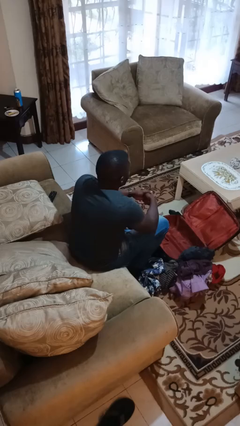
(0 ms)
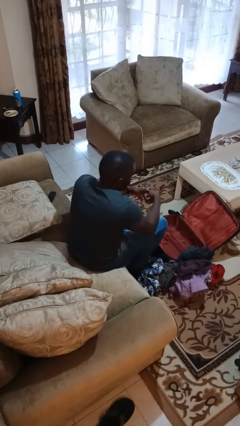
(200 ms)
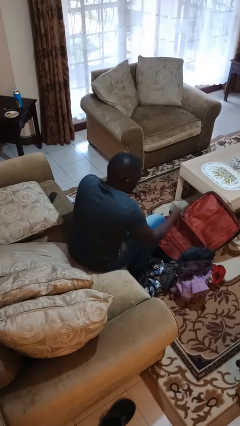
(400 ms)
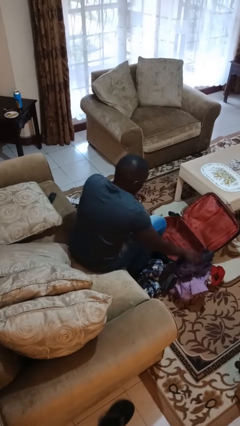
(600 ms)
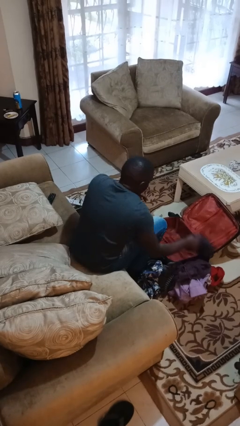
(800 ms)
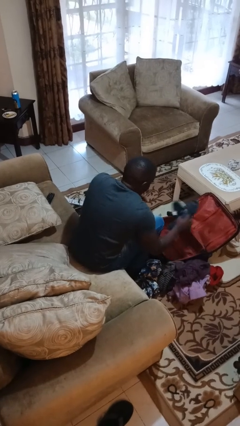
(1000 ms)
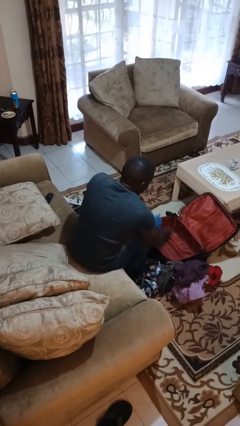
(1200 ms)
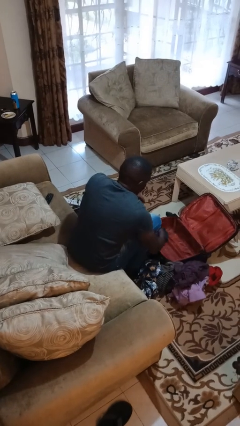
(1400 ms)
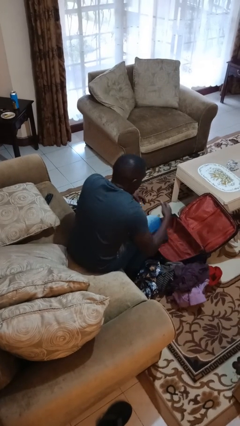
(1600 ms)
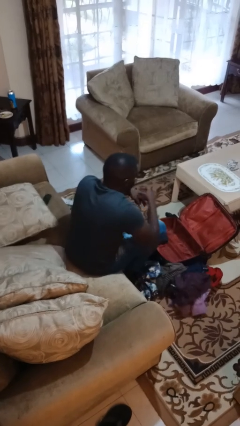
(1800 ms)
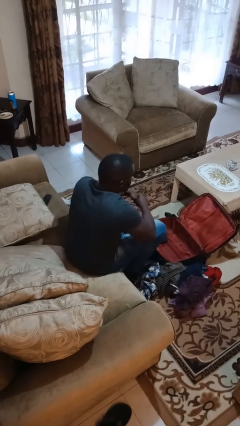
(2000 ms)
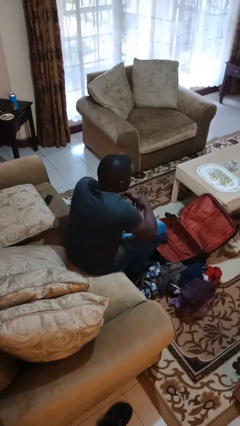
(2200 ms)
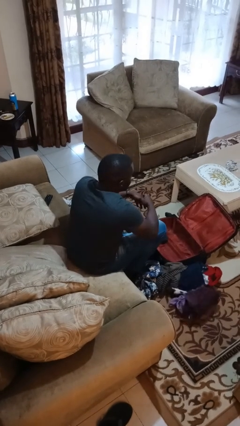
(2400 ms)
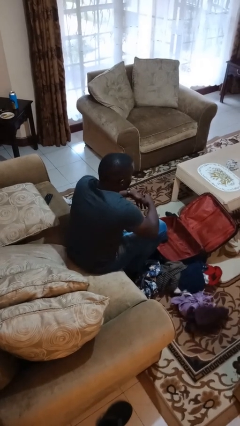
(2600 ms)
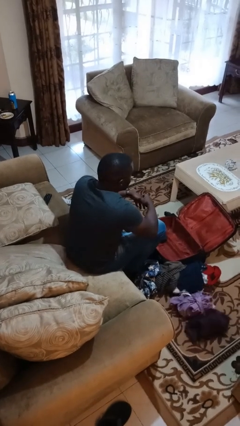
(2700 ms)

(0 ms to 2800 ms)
person loads clothes into suitcase

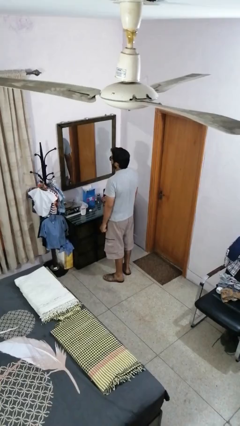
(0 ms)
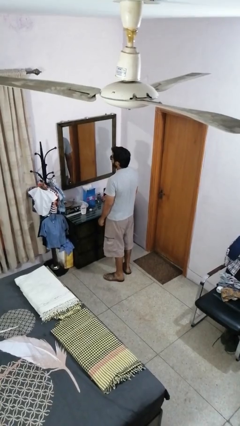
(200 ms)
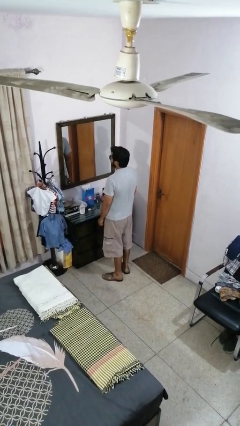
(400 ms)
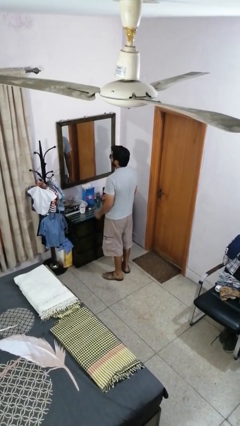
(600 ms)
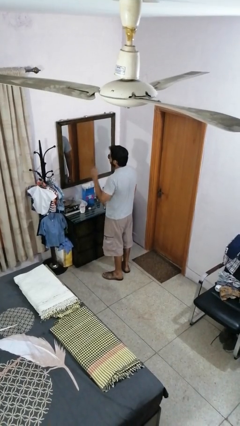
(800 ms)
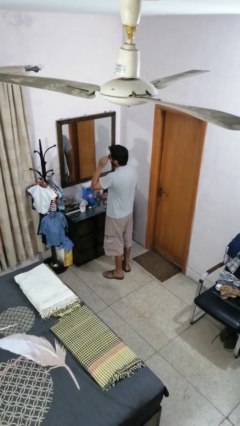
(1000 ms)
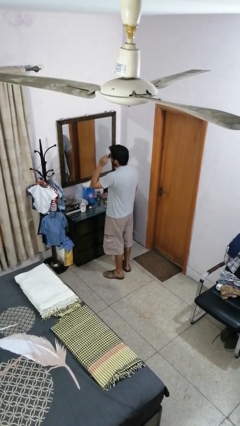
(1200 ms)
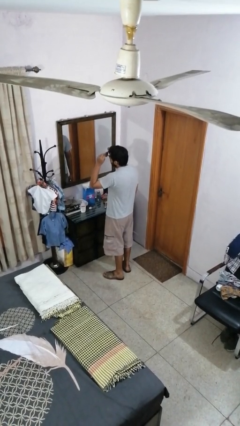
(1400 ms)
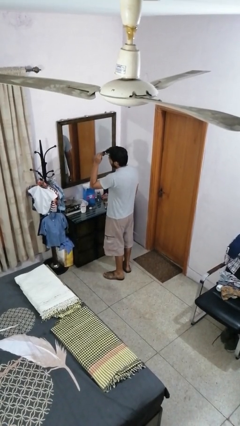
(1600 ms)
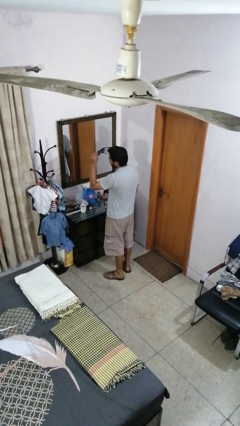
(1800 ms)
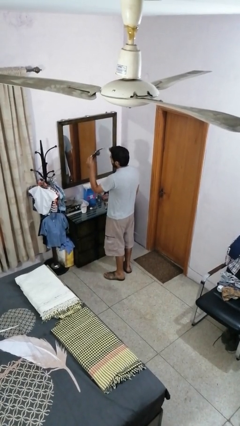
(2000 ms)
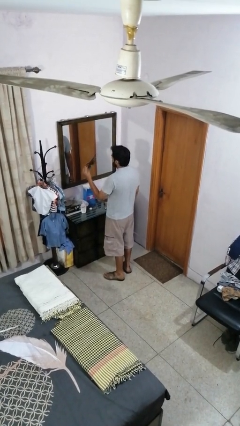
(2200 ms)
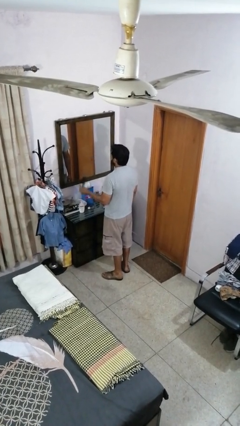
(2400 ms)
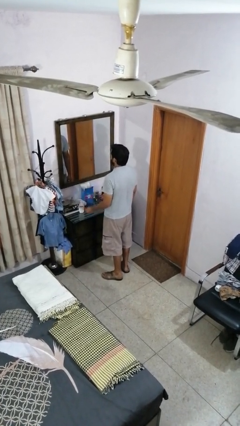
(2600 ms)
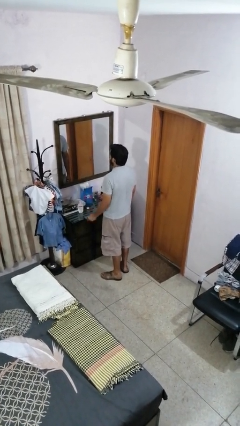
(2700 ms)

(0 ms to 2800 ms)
person takes off sunglasses

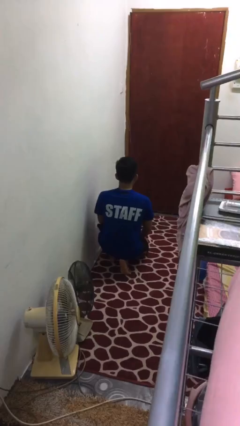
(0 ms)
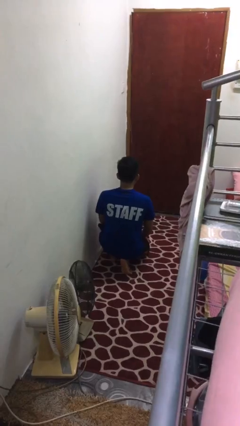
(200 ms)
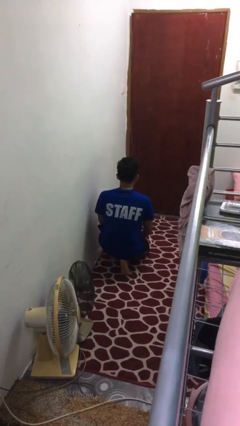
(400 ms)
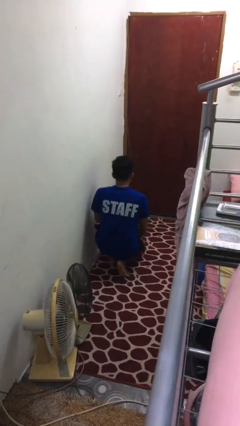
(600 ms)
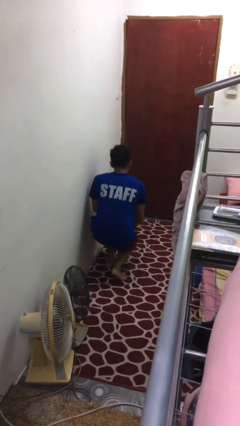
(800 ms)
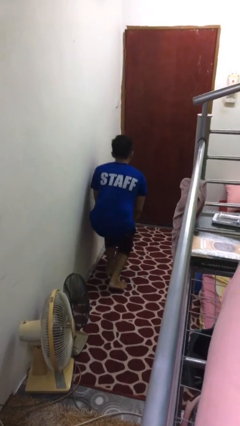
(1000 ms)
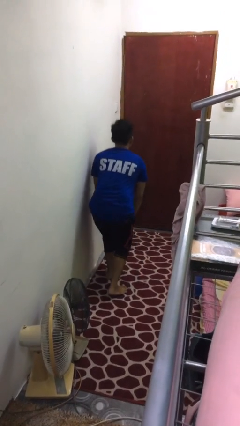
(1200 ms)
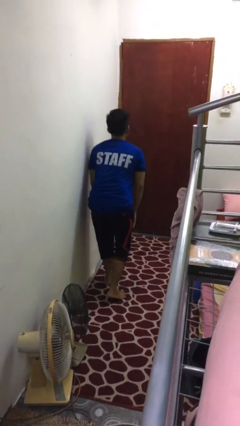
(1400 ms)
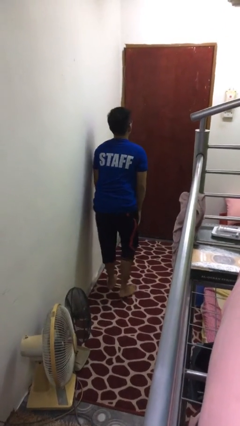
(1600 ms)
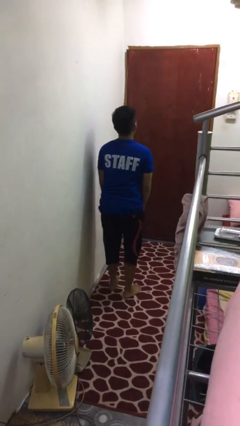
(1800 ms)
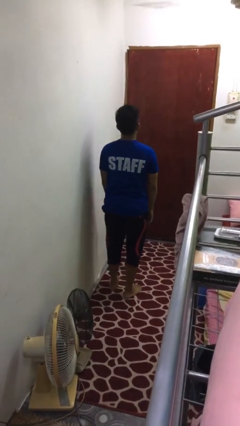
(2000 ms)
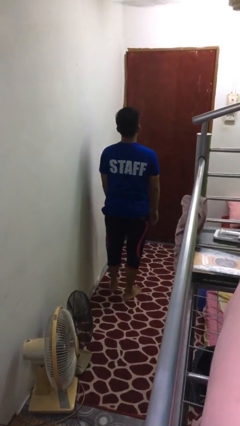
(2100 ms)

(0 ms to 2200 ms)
person stands up from floor

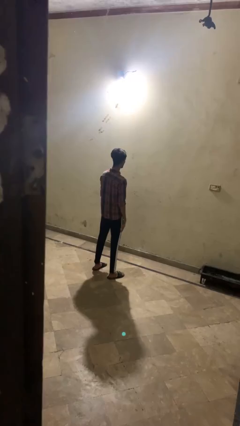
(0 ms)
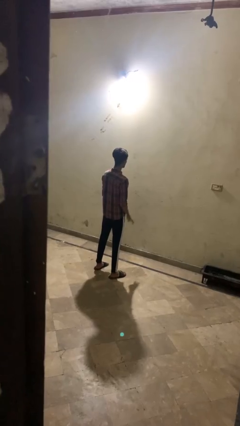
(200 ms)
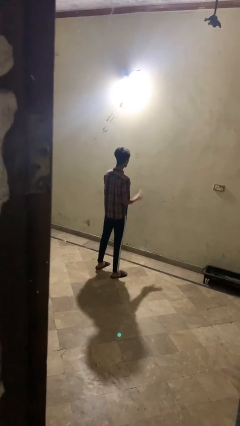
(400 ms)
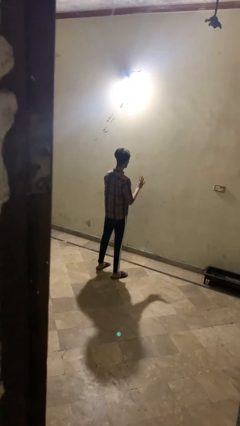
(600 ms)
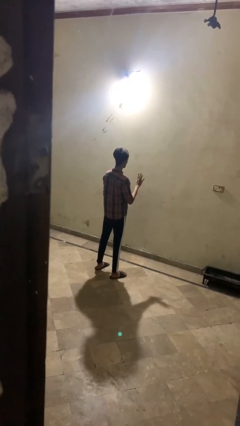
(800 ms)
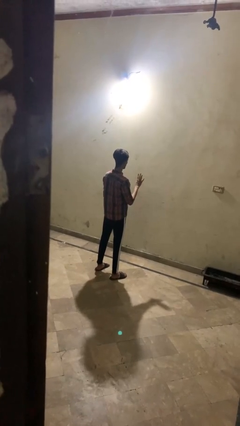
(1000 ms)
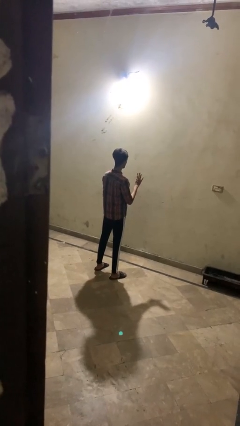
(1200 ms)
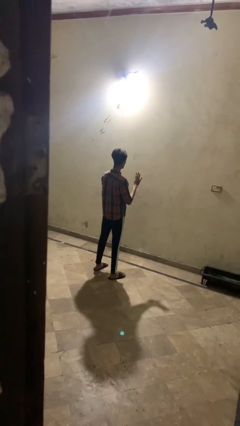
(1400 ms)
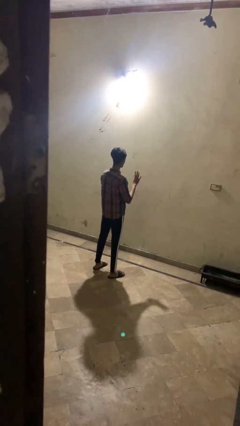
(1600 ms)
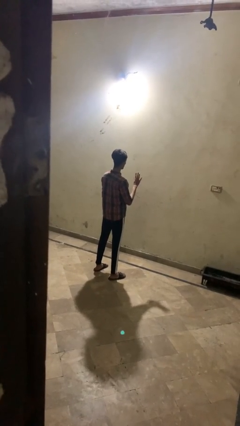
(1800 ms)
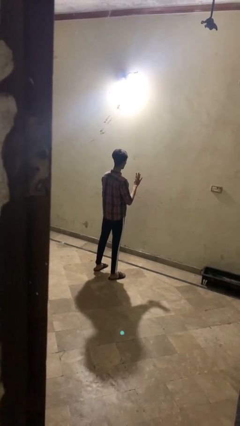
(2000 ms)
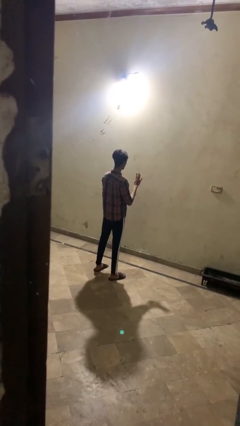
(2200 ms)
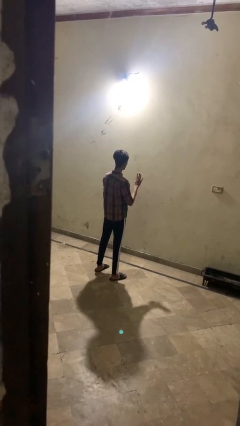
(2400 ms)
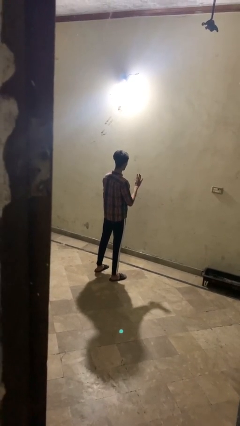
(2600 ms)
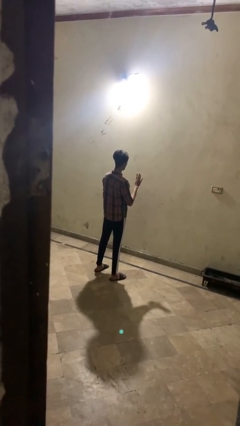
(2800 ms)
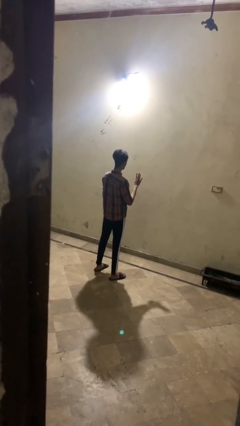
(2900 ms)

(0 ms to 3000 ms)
person gestures number four

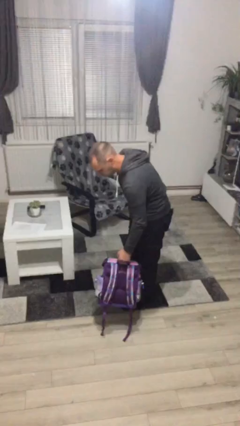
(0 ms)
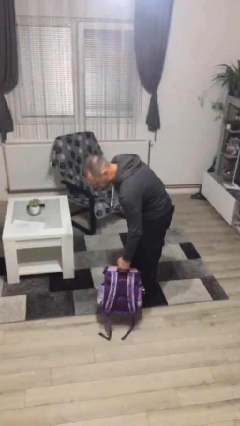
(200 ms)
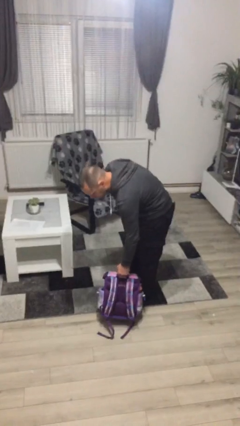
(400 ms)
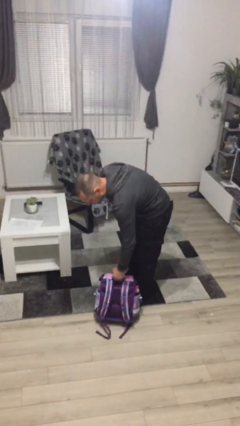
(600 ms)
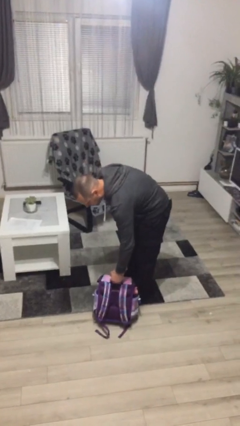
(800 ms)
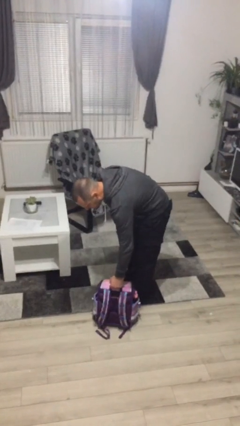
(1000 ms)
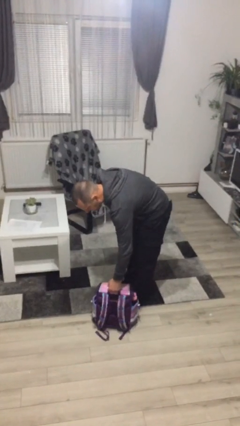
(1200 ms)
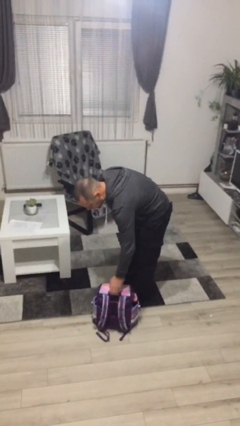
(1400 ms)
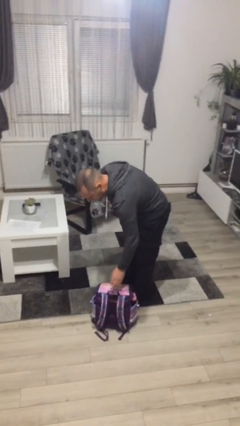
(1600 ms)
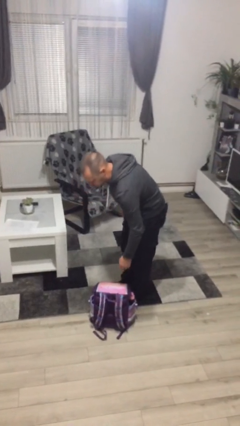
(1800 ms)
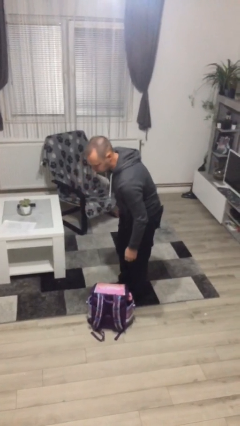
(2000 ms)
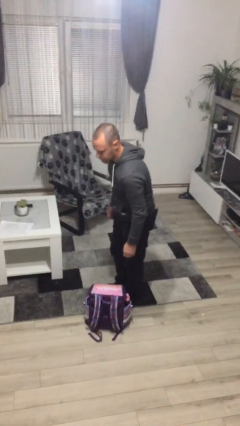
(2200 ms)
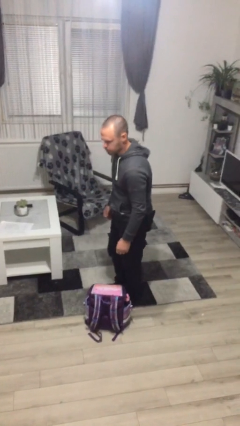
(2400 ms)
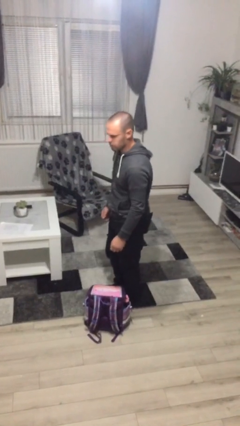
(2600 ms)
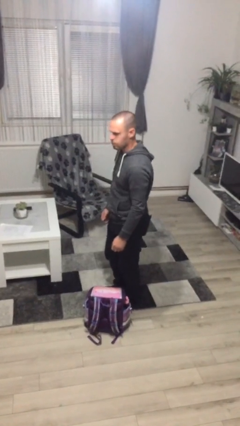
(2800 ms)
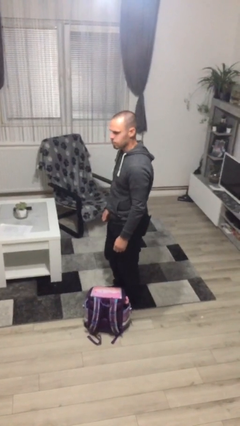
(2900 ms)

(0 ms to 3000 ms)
person puts down object on floor

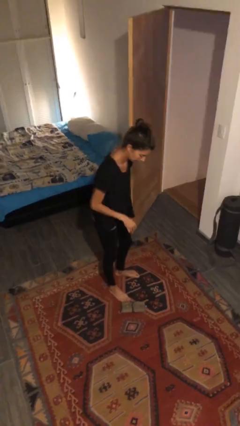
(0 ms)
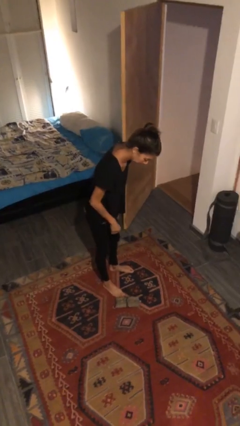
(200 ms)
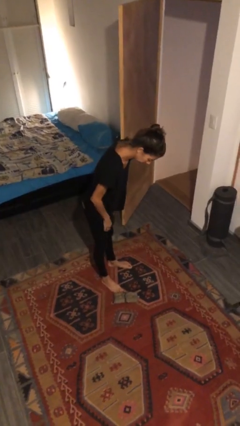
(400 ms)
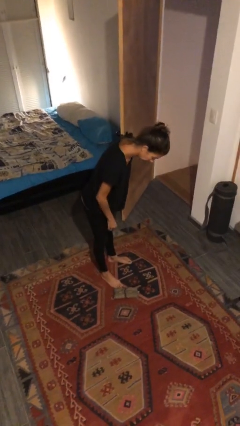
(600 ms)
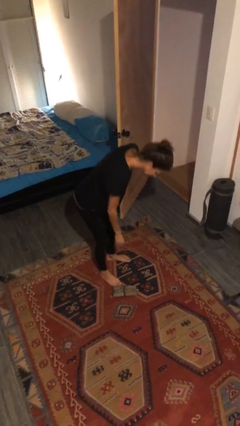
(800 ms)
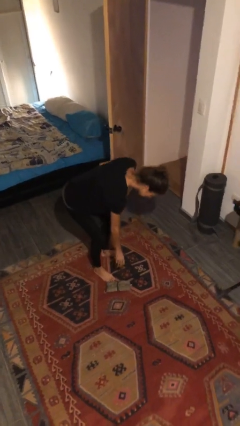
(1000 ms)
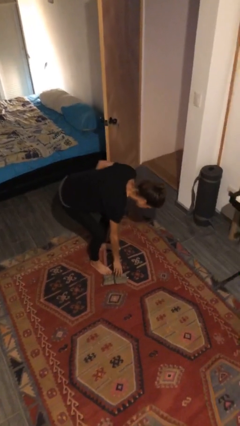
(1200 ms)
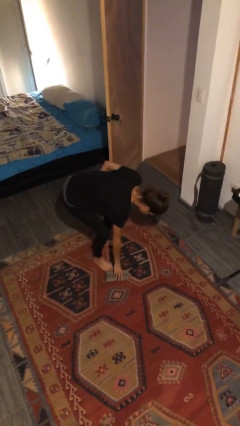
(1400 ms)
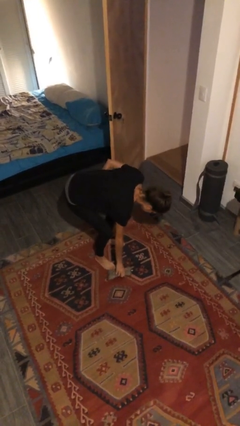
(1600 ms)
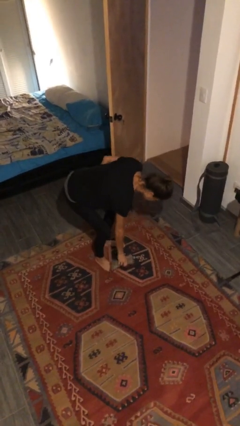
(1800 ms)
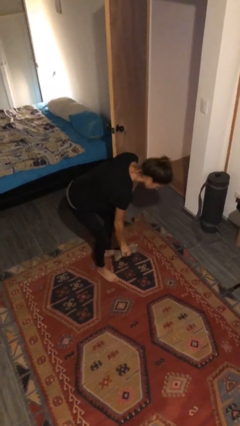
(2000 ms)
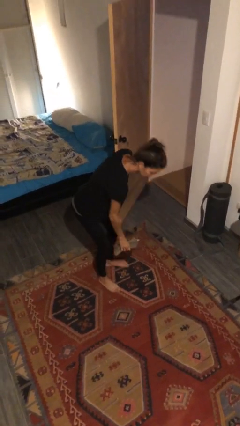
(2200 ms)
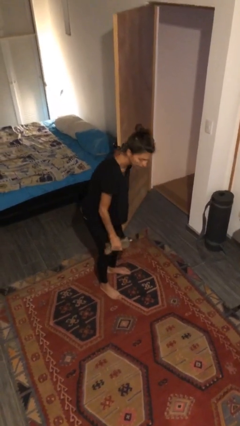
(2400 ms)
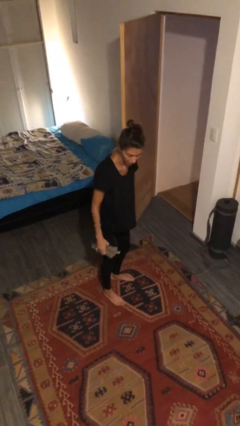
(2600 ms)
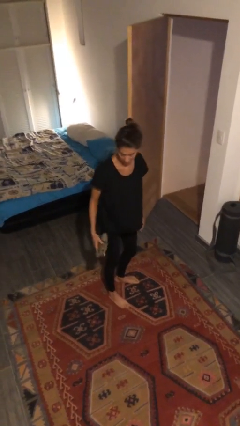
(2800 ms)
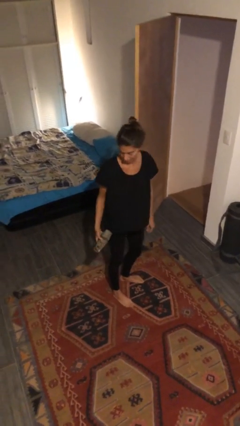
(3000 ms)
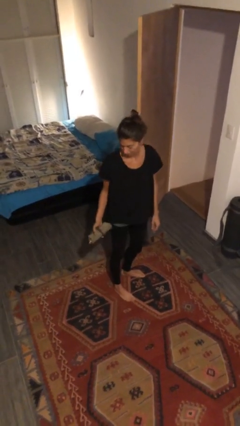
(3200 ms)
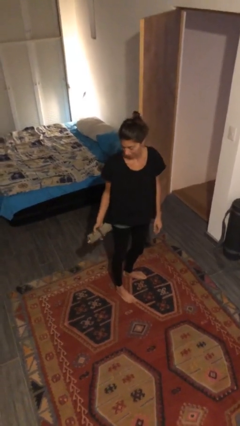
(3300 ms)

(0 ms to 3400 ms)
person picks up object from floor
